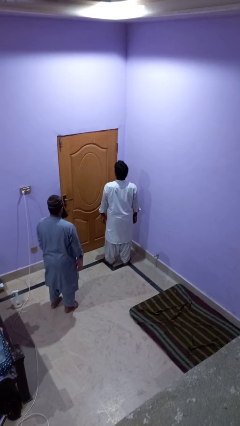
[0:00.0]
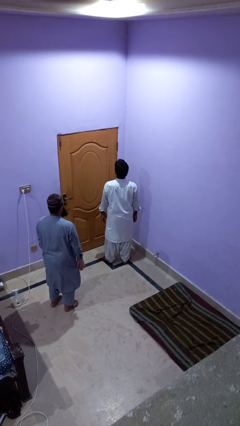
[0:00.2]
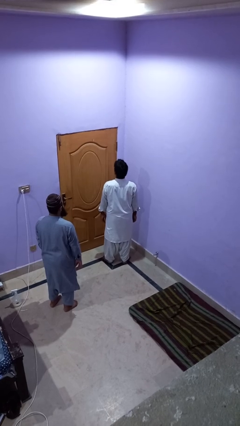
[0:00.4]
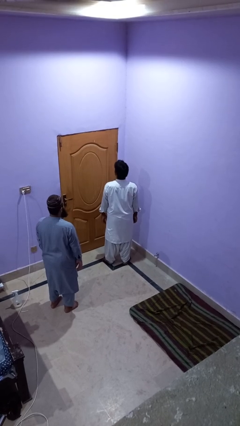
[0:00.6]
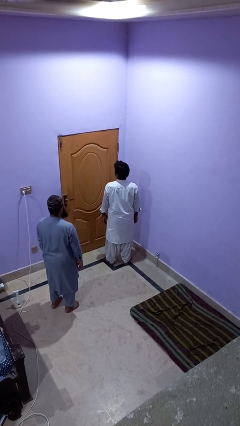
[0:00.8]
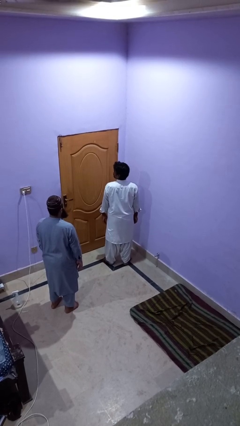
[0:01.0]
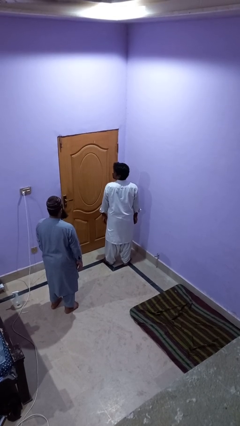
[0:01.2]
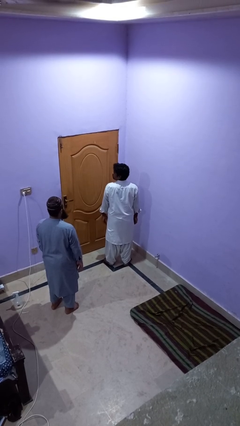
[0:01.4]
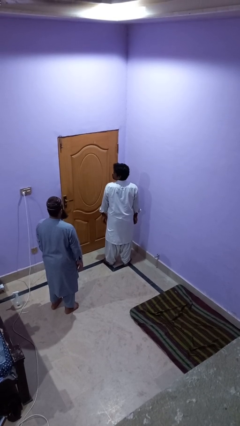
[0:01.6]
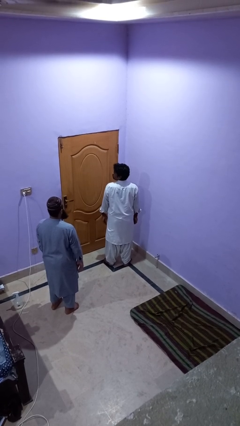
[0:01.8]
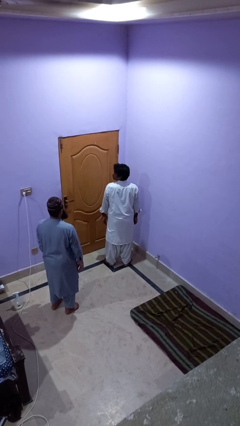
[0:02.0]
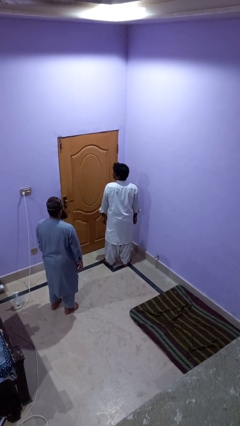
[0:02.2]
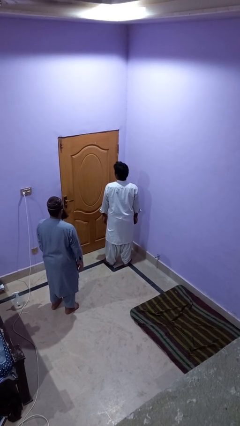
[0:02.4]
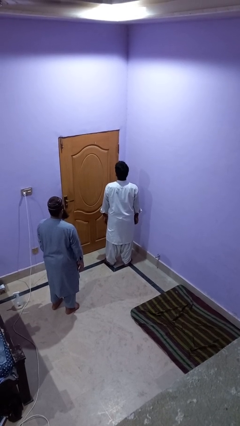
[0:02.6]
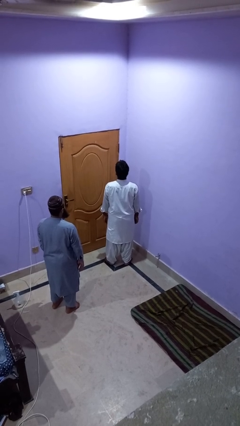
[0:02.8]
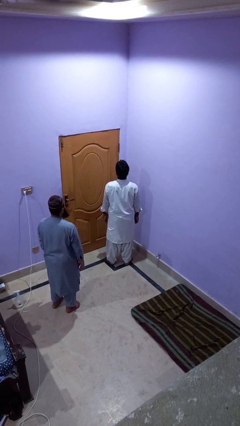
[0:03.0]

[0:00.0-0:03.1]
person looks over shoulder

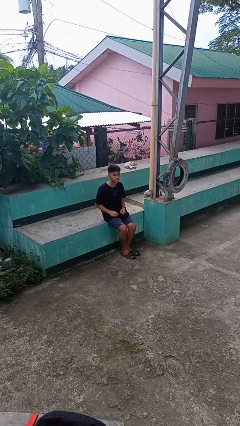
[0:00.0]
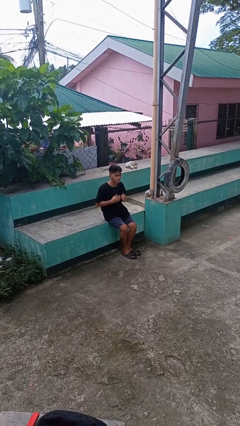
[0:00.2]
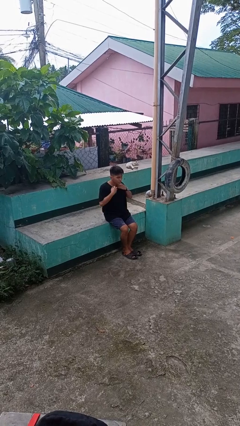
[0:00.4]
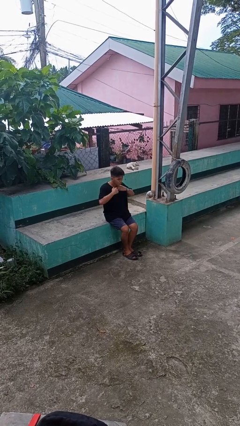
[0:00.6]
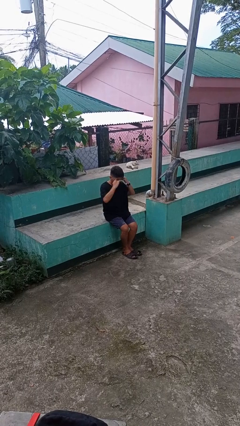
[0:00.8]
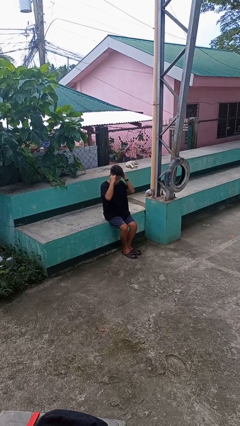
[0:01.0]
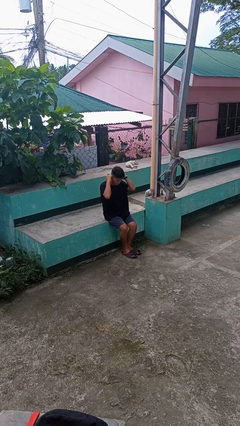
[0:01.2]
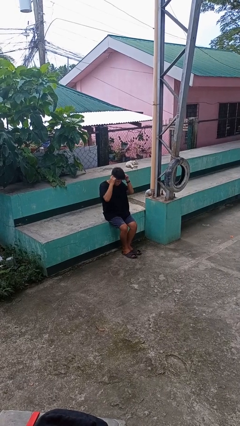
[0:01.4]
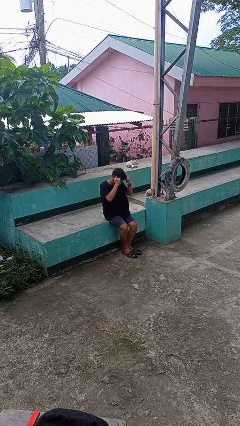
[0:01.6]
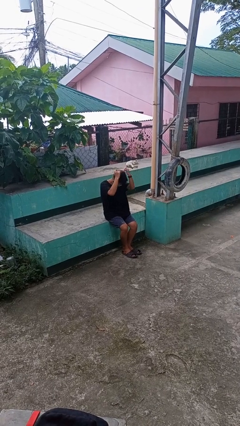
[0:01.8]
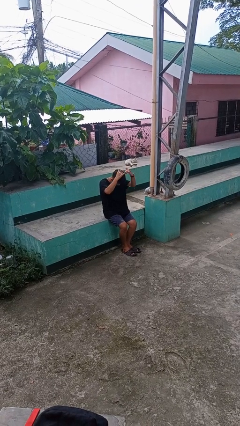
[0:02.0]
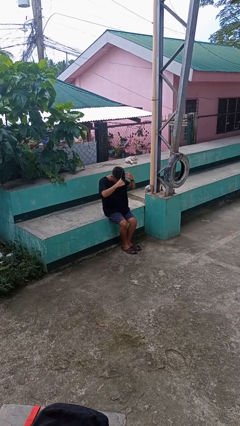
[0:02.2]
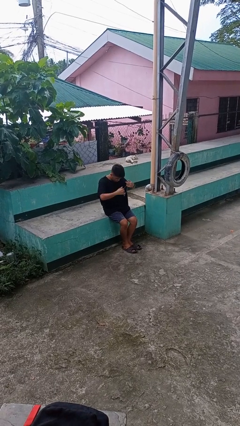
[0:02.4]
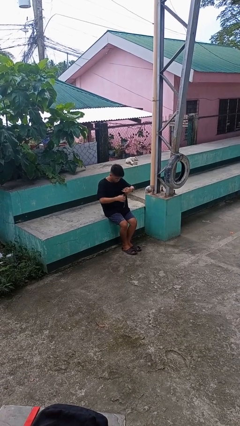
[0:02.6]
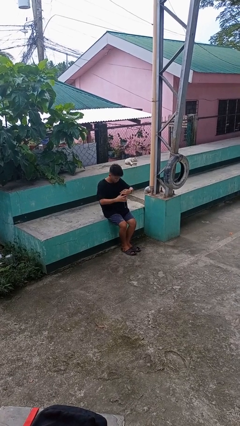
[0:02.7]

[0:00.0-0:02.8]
person takes off necklace

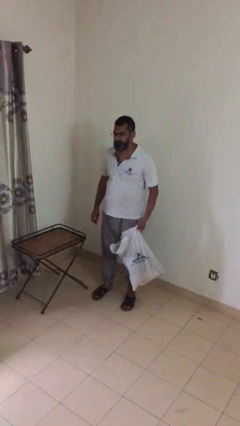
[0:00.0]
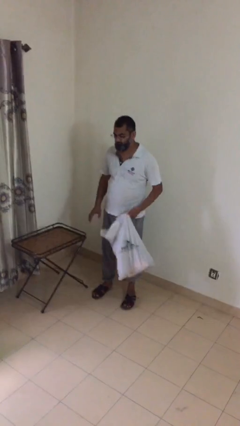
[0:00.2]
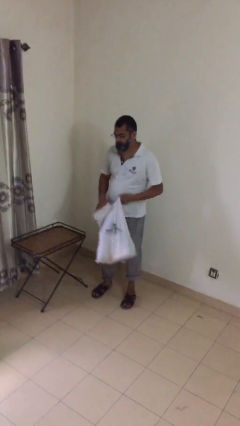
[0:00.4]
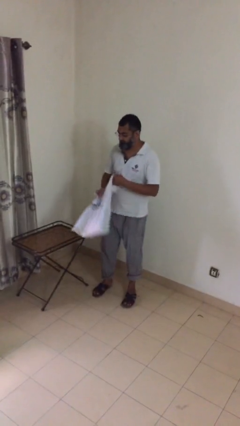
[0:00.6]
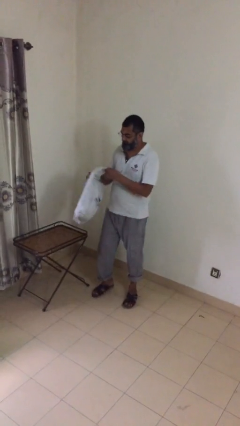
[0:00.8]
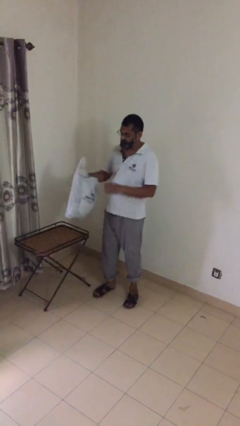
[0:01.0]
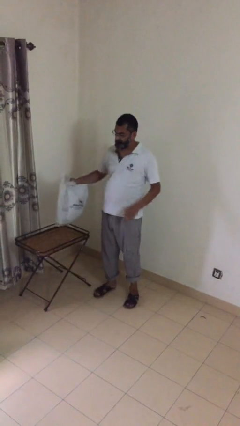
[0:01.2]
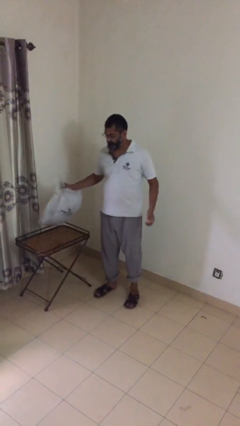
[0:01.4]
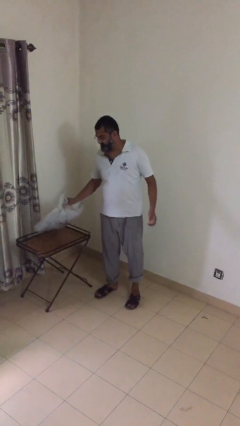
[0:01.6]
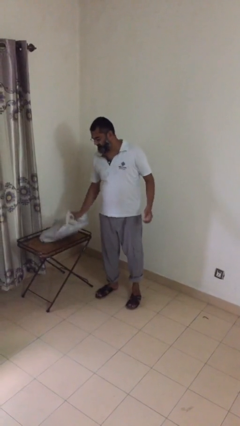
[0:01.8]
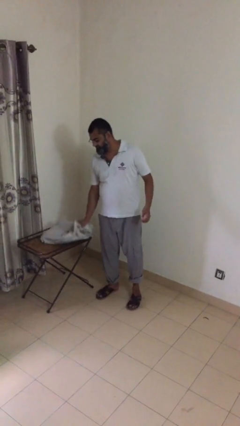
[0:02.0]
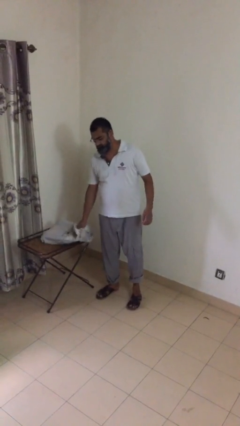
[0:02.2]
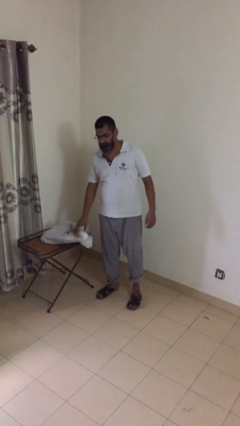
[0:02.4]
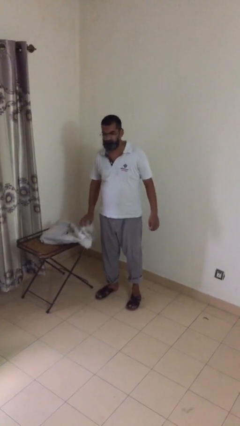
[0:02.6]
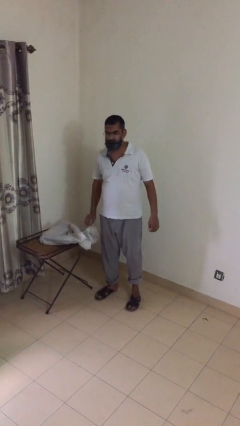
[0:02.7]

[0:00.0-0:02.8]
person puts down object on table

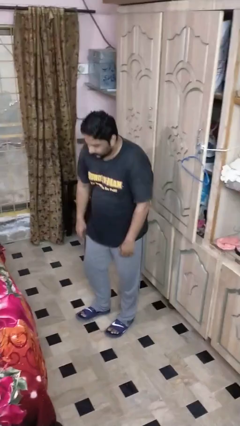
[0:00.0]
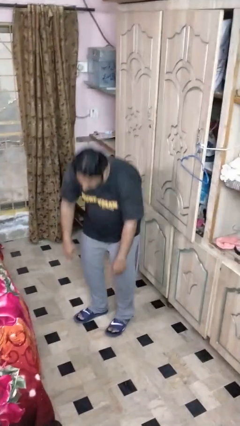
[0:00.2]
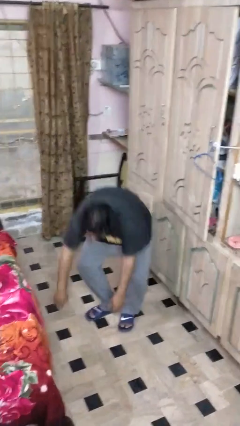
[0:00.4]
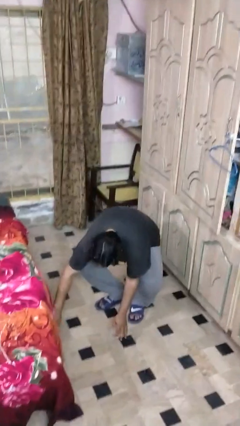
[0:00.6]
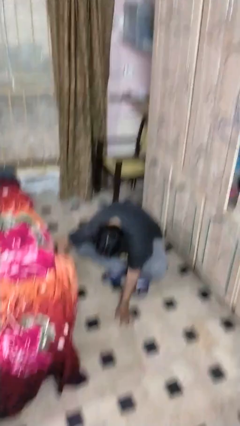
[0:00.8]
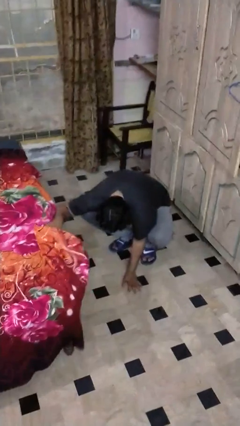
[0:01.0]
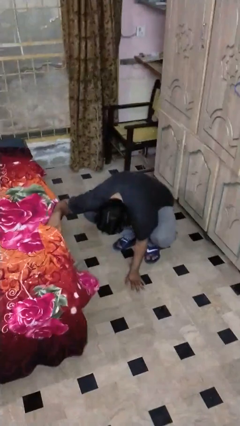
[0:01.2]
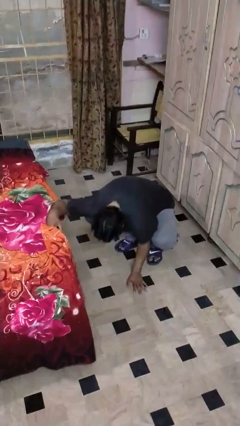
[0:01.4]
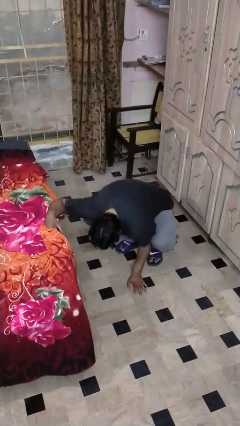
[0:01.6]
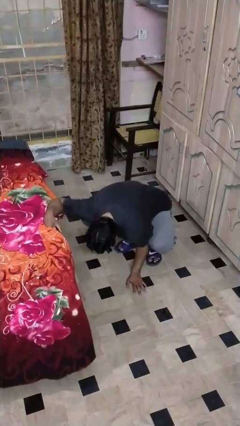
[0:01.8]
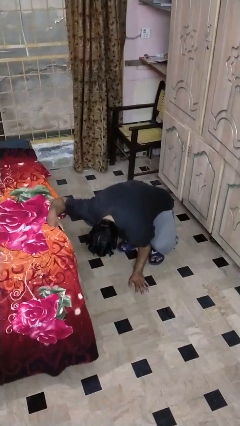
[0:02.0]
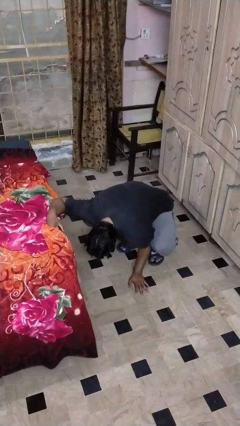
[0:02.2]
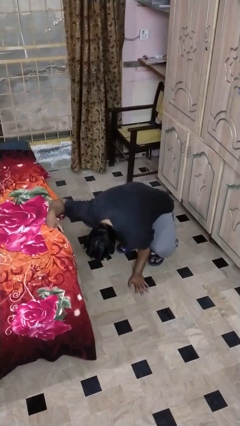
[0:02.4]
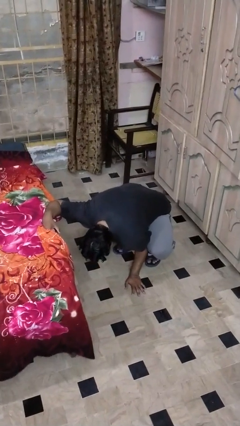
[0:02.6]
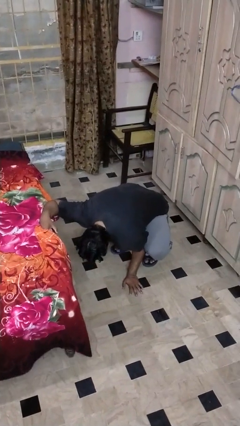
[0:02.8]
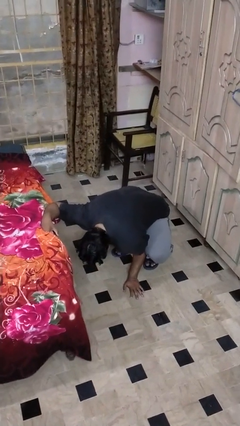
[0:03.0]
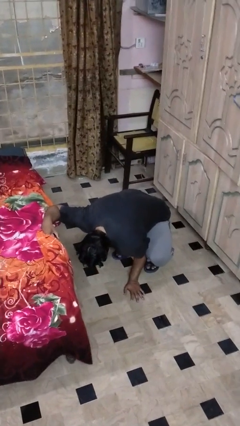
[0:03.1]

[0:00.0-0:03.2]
person searches under bed

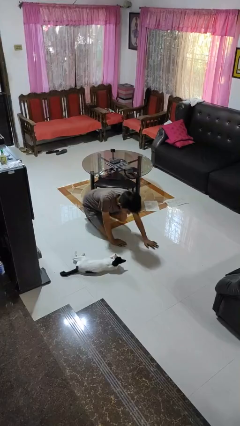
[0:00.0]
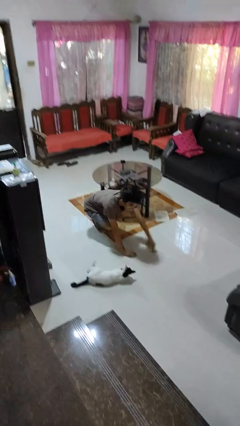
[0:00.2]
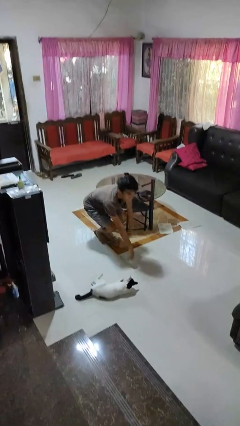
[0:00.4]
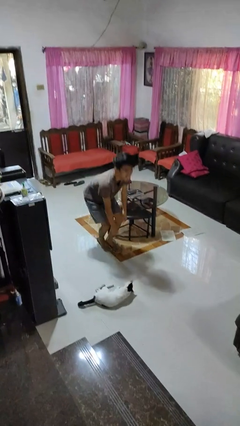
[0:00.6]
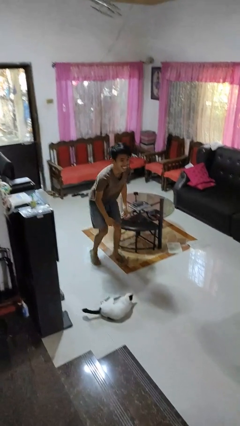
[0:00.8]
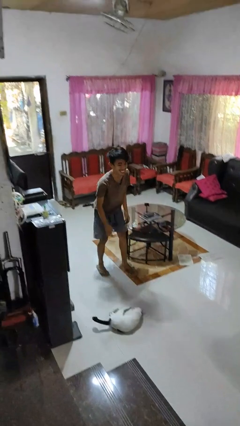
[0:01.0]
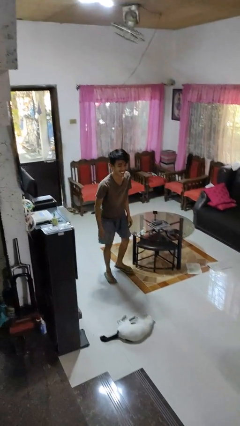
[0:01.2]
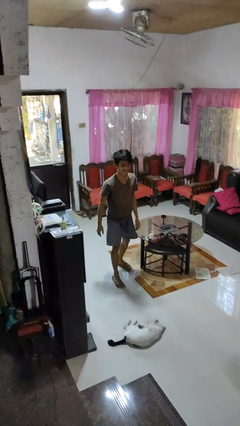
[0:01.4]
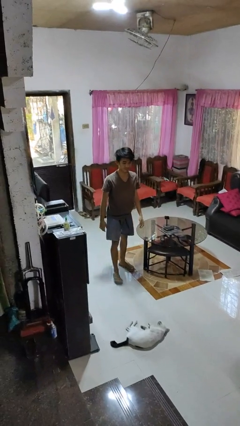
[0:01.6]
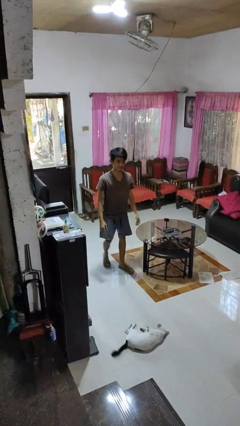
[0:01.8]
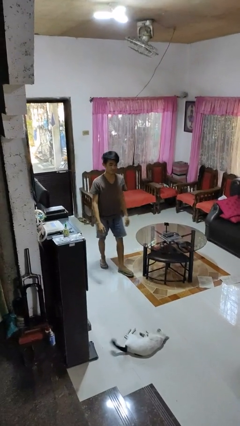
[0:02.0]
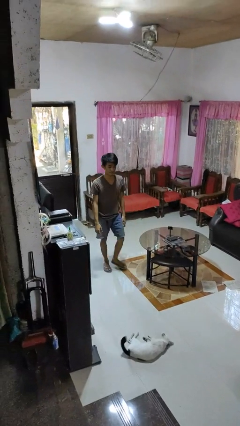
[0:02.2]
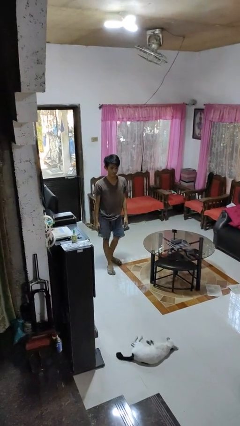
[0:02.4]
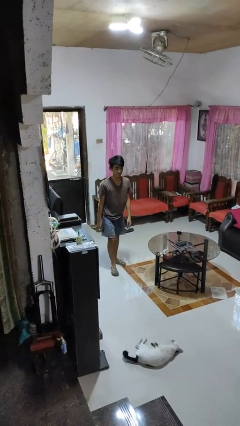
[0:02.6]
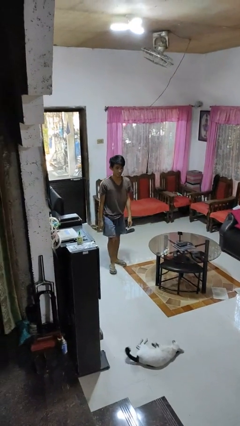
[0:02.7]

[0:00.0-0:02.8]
person stands up from floor

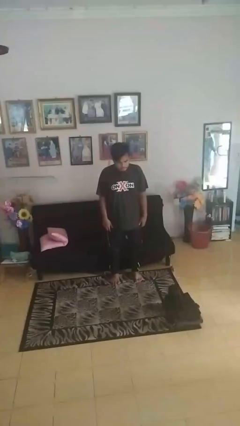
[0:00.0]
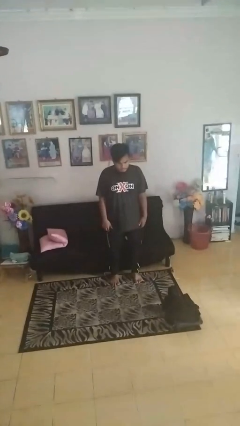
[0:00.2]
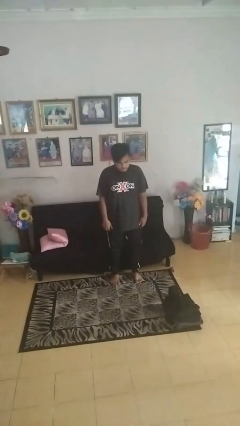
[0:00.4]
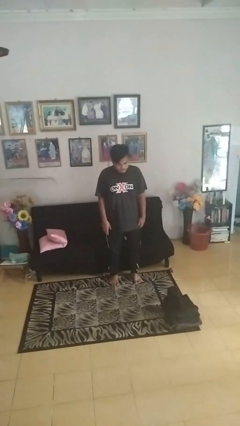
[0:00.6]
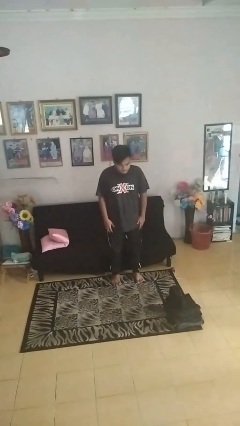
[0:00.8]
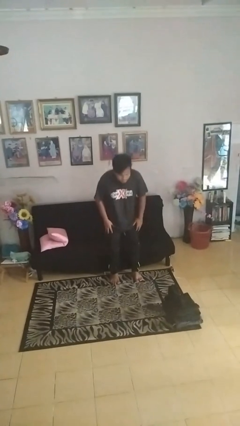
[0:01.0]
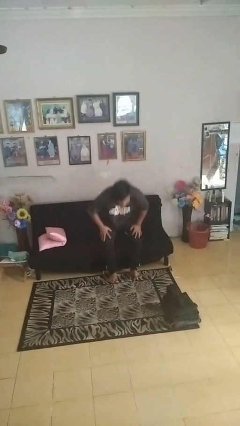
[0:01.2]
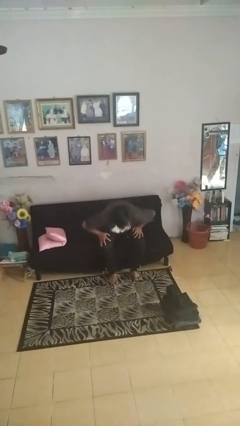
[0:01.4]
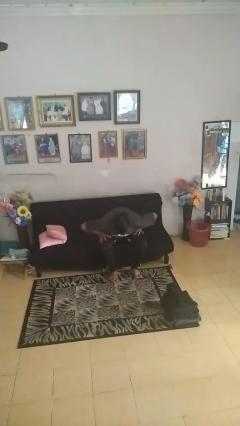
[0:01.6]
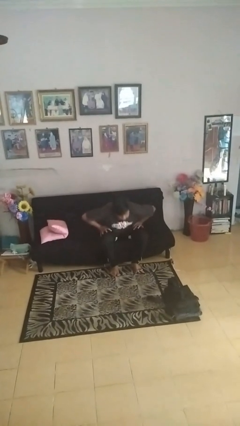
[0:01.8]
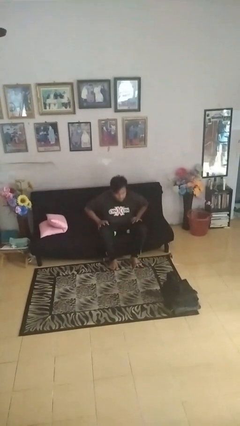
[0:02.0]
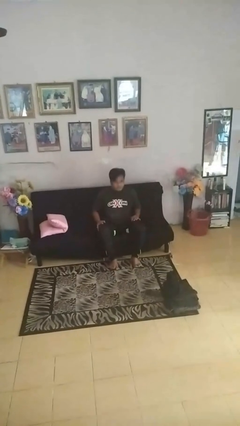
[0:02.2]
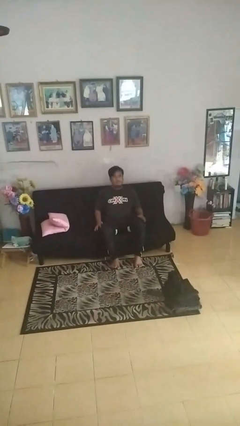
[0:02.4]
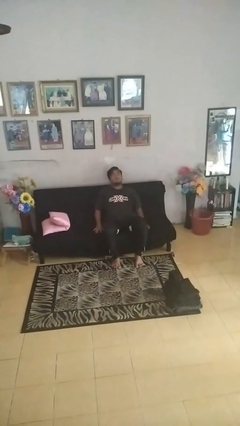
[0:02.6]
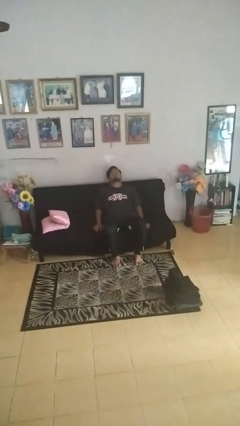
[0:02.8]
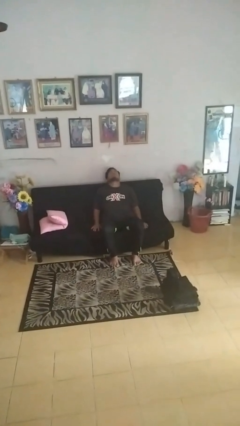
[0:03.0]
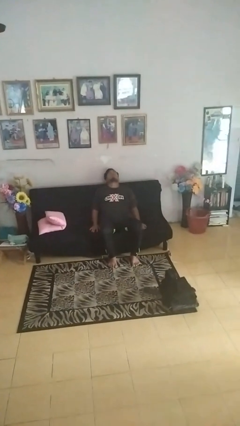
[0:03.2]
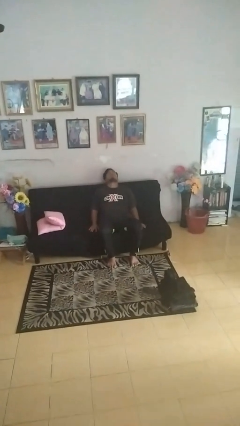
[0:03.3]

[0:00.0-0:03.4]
person lies down on couch

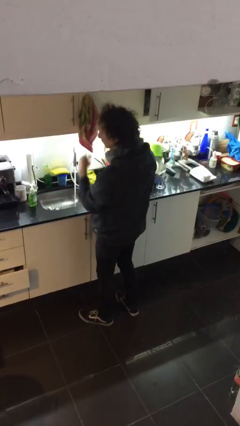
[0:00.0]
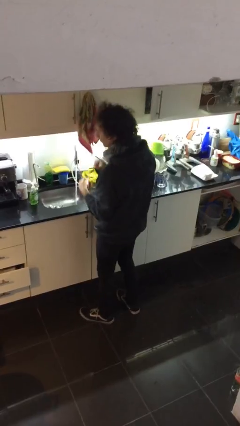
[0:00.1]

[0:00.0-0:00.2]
person washes hands
